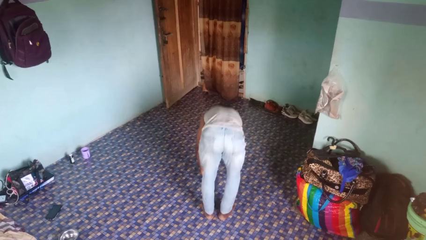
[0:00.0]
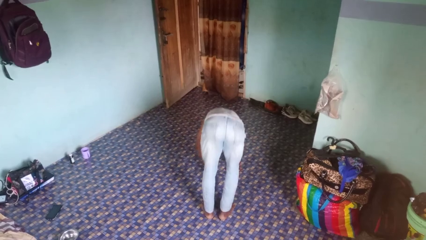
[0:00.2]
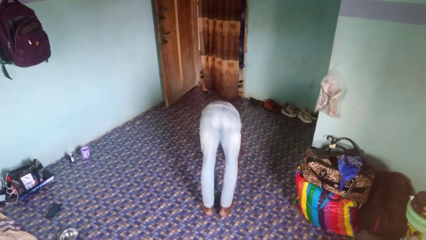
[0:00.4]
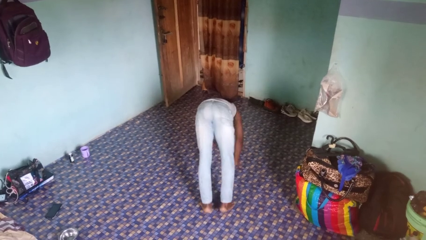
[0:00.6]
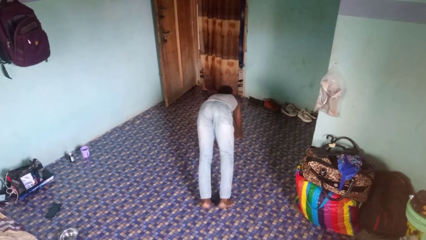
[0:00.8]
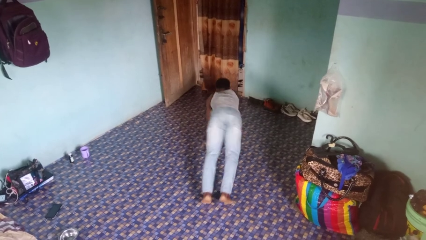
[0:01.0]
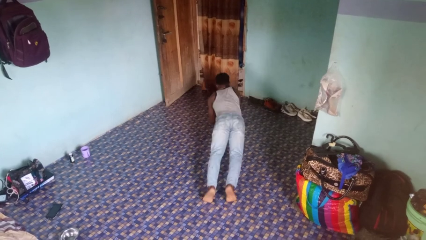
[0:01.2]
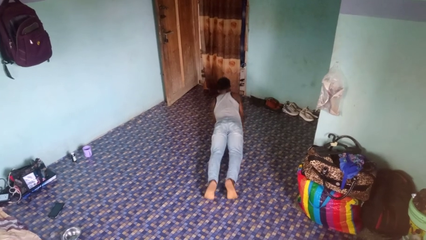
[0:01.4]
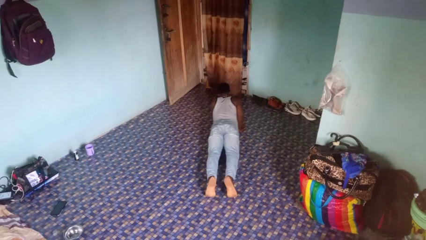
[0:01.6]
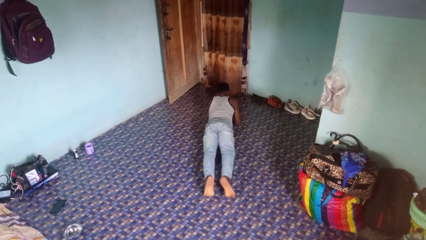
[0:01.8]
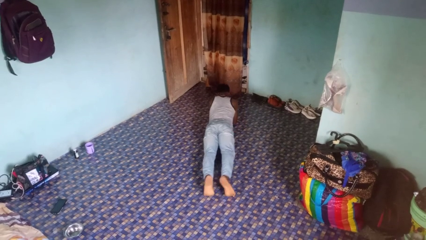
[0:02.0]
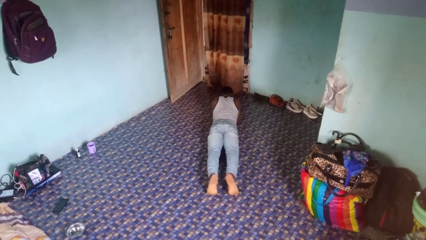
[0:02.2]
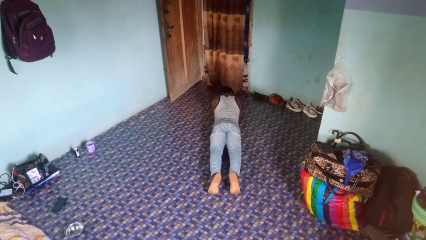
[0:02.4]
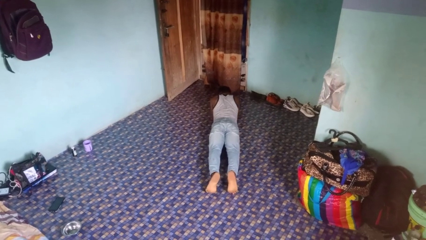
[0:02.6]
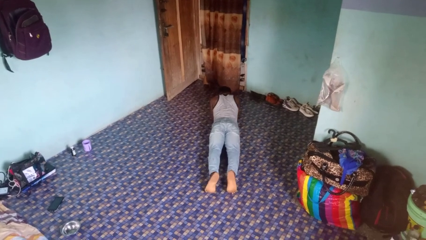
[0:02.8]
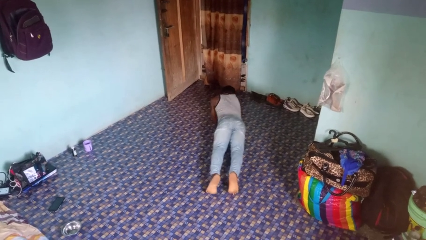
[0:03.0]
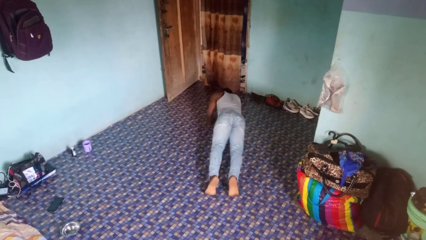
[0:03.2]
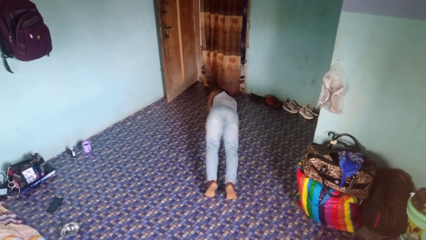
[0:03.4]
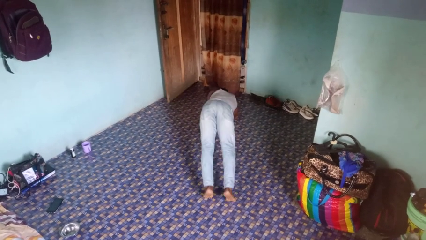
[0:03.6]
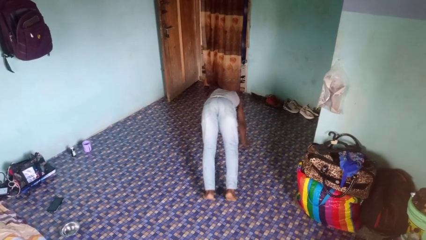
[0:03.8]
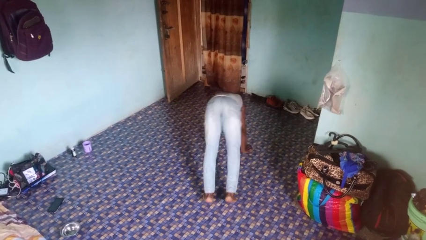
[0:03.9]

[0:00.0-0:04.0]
person exercises with plank

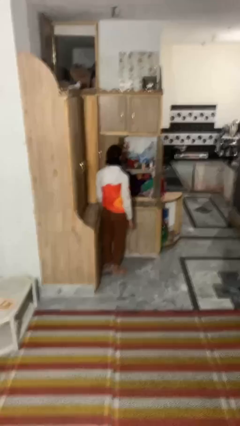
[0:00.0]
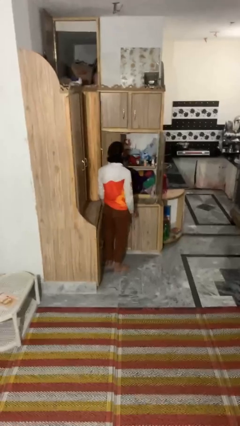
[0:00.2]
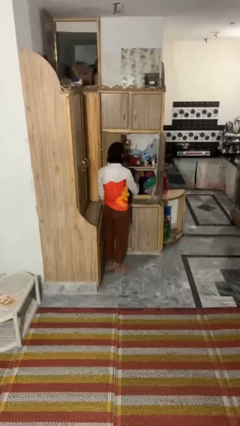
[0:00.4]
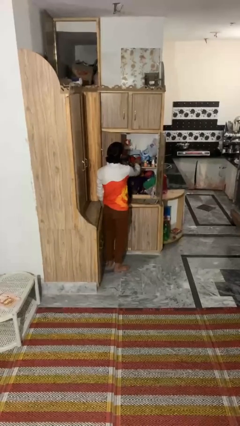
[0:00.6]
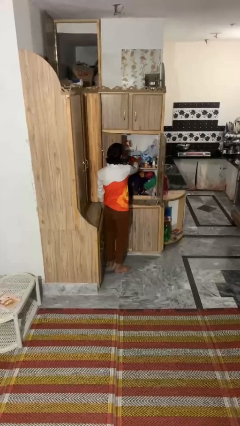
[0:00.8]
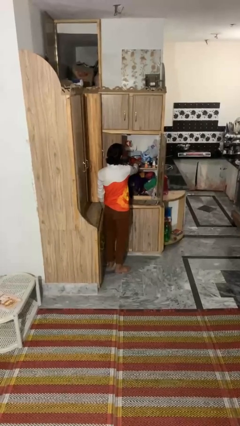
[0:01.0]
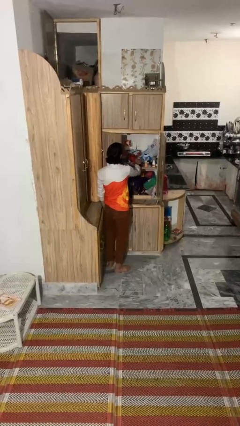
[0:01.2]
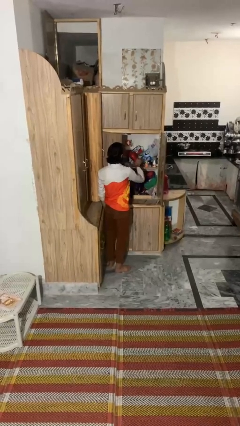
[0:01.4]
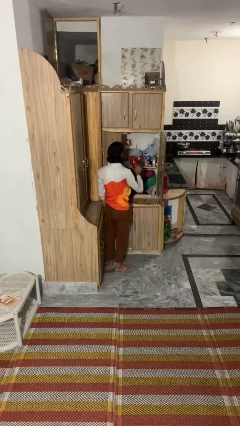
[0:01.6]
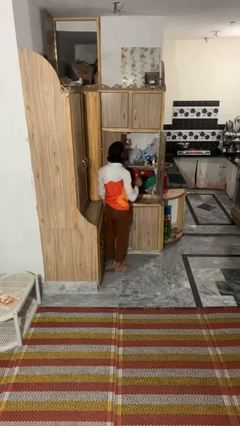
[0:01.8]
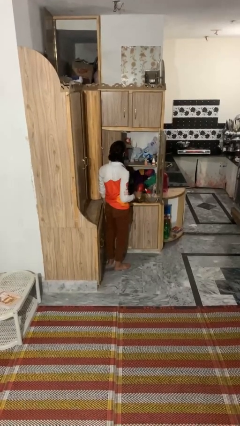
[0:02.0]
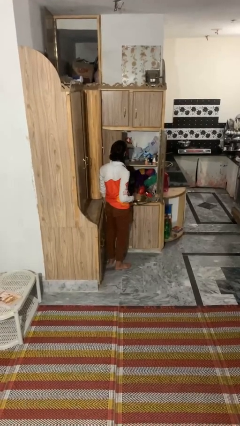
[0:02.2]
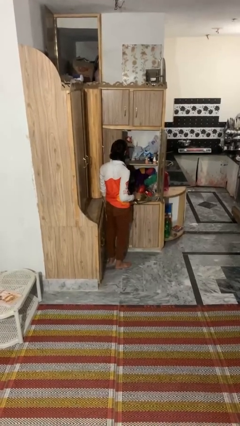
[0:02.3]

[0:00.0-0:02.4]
person picks up object from cabinet

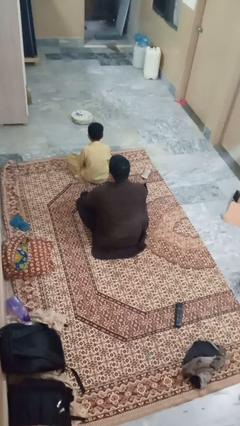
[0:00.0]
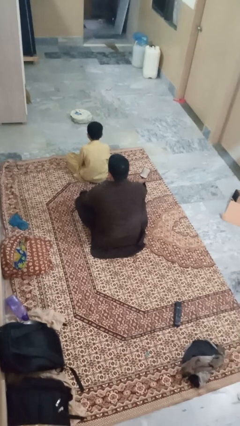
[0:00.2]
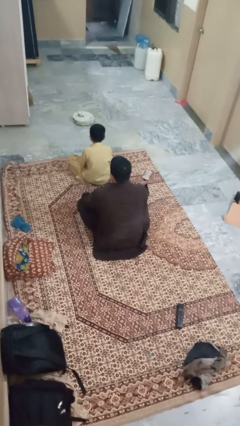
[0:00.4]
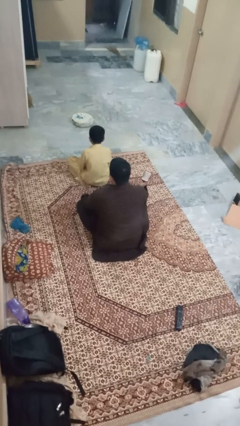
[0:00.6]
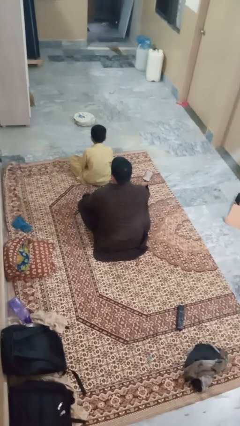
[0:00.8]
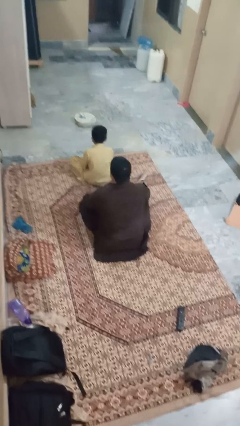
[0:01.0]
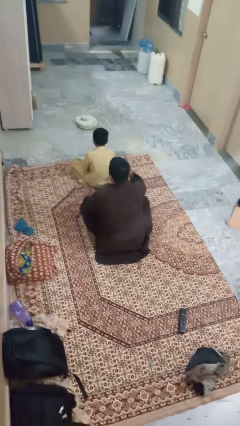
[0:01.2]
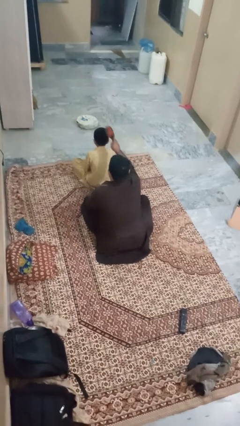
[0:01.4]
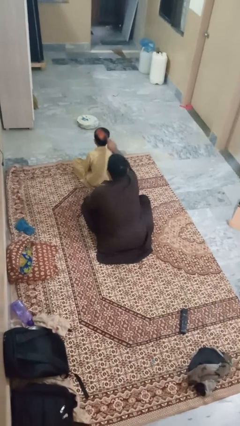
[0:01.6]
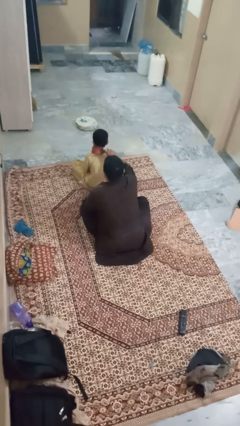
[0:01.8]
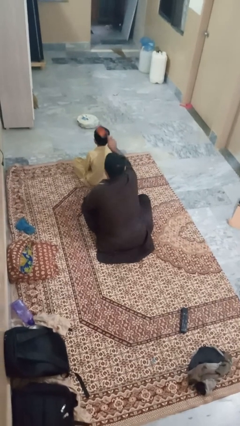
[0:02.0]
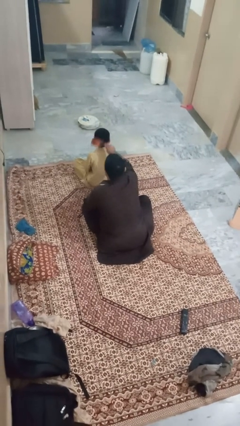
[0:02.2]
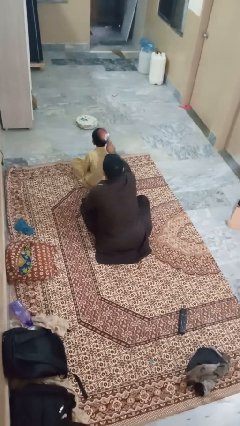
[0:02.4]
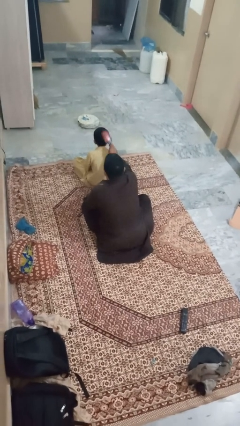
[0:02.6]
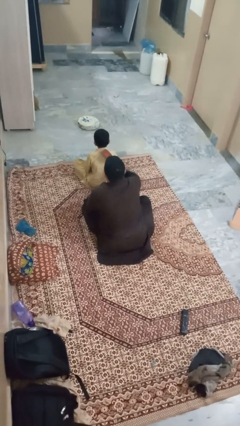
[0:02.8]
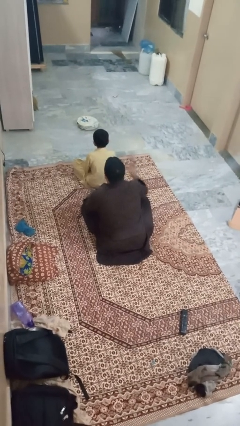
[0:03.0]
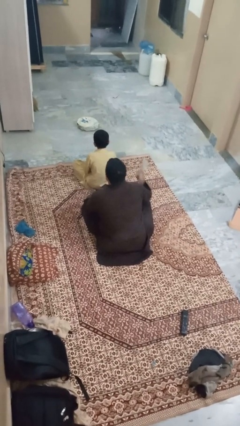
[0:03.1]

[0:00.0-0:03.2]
person brushes hair of person

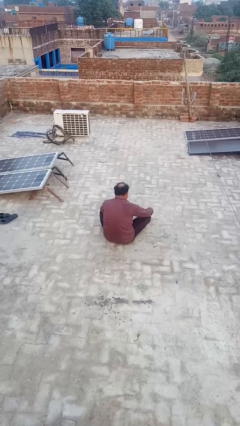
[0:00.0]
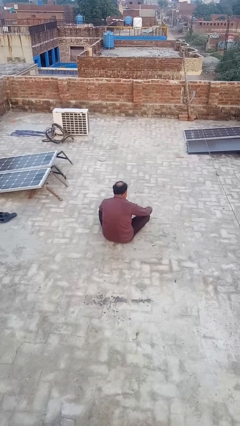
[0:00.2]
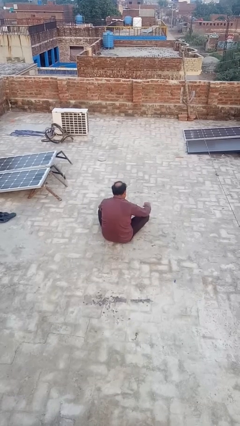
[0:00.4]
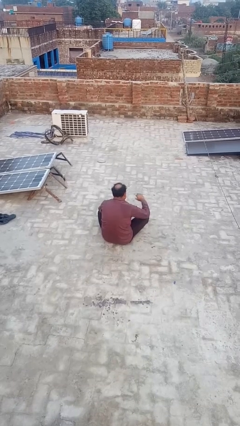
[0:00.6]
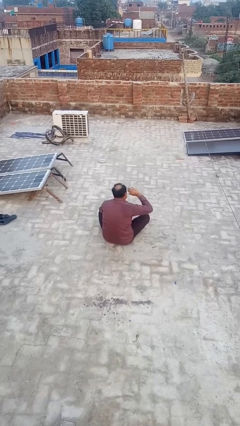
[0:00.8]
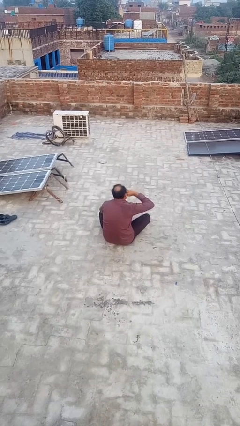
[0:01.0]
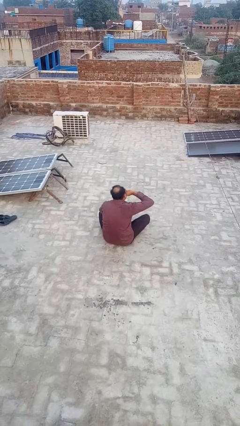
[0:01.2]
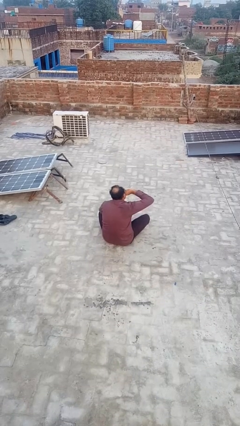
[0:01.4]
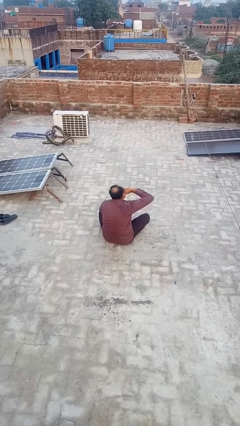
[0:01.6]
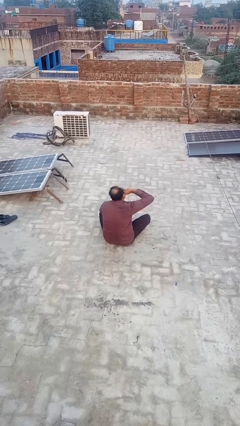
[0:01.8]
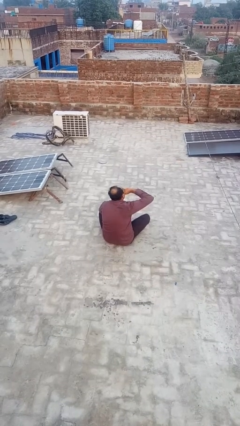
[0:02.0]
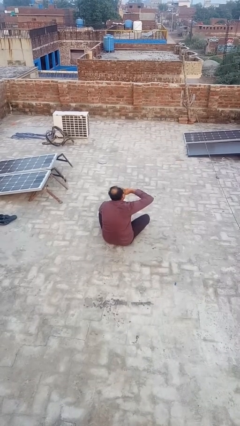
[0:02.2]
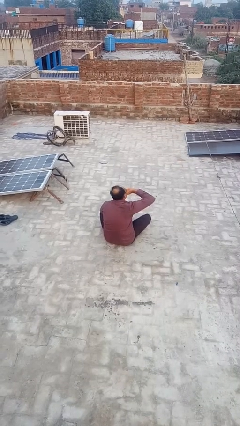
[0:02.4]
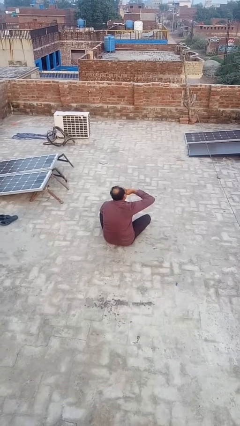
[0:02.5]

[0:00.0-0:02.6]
person yawns

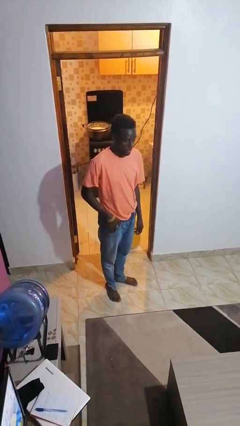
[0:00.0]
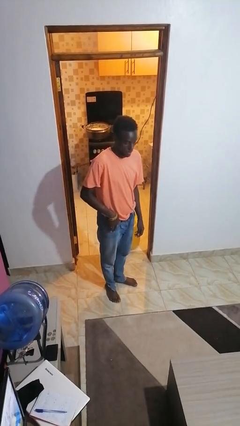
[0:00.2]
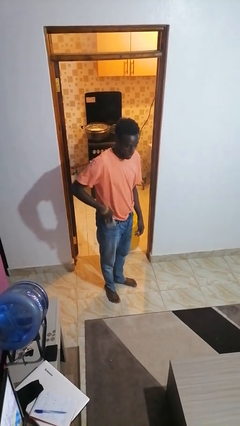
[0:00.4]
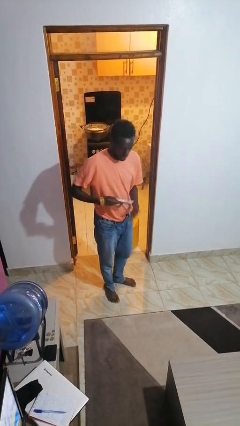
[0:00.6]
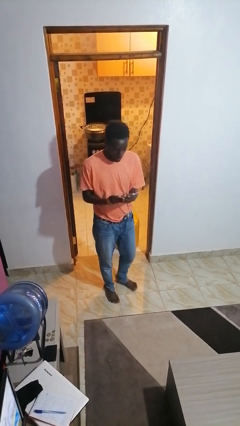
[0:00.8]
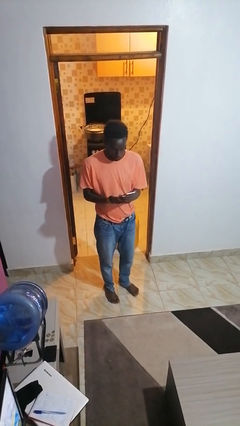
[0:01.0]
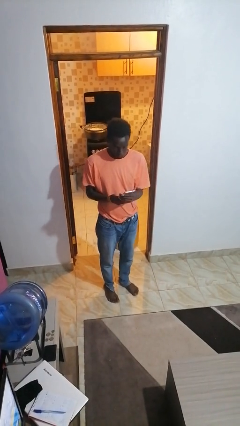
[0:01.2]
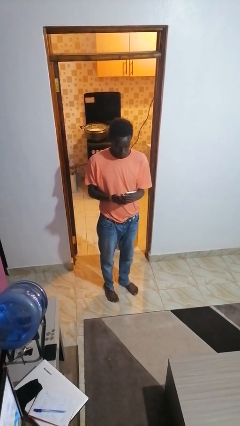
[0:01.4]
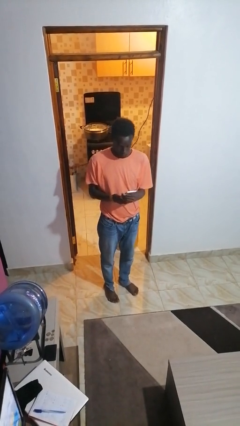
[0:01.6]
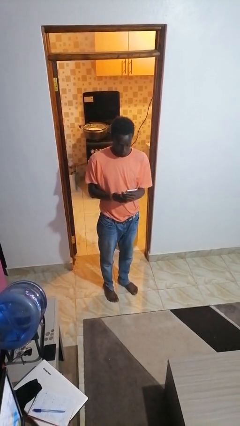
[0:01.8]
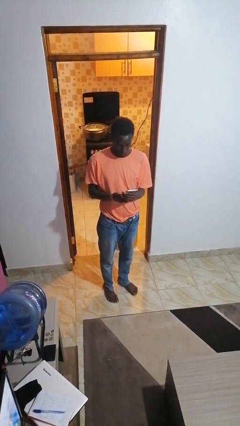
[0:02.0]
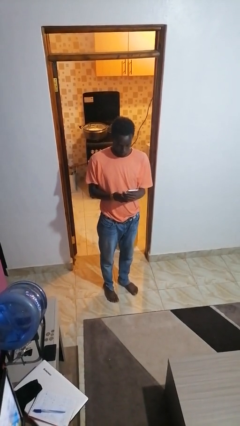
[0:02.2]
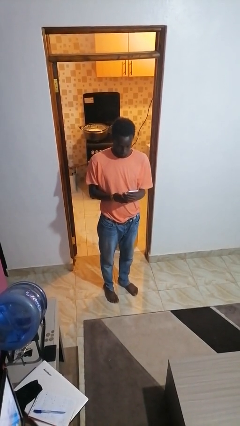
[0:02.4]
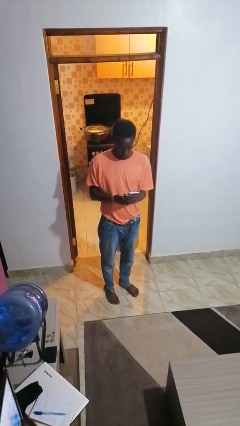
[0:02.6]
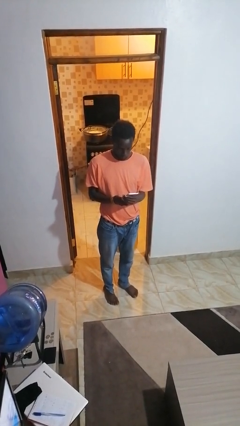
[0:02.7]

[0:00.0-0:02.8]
person takes phone from pocket

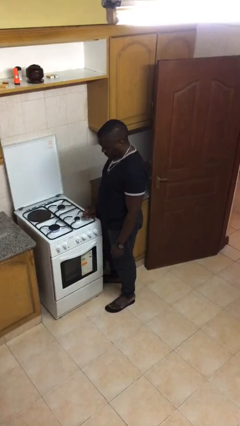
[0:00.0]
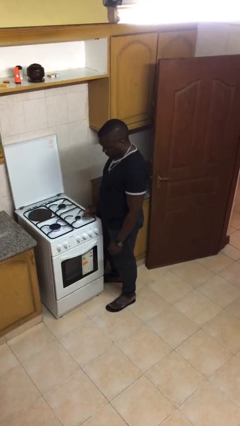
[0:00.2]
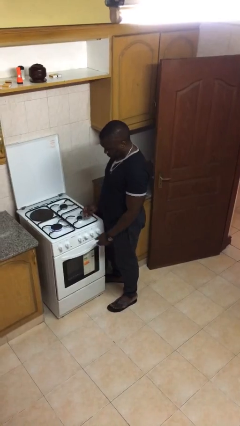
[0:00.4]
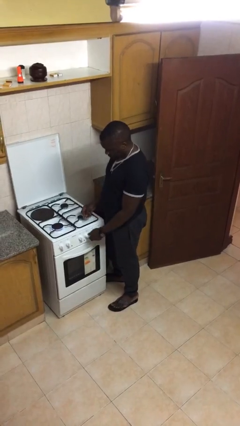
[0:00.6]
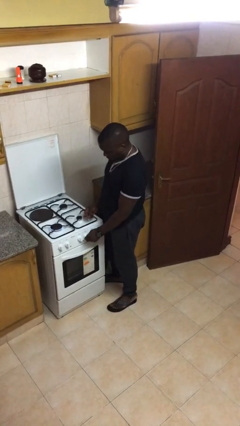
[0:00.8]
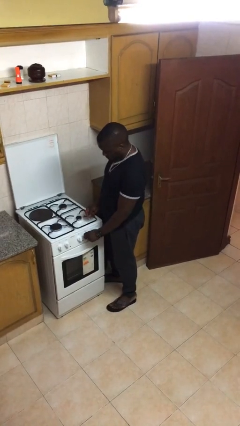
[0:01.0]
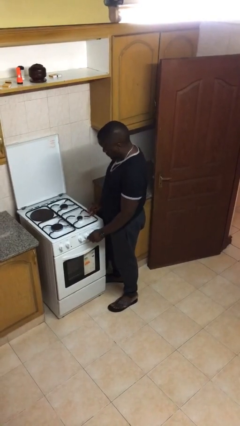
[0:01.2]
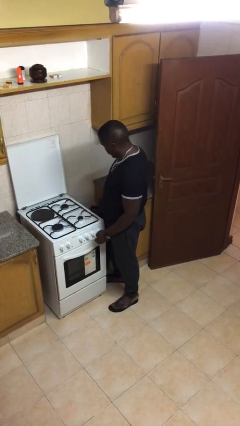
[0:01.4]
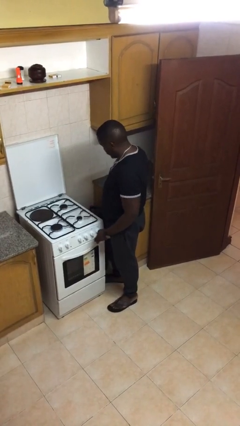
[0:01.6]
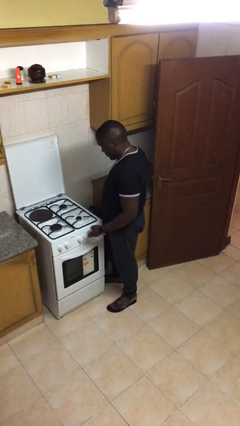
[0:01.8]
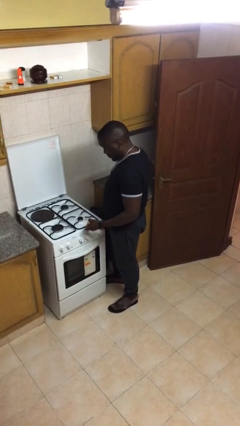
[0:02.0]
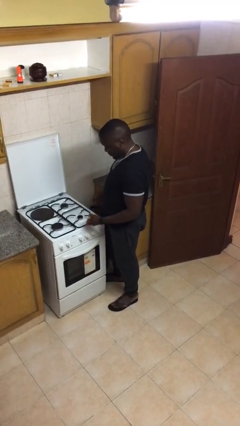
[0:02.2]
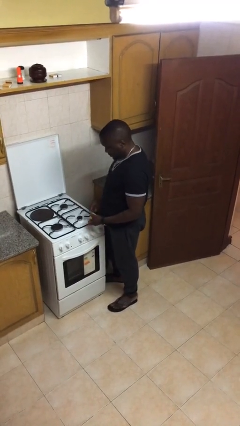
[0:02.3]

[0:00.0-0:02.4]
person turns off stovetop
